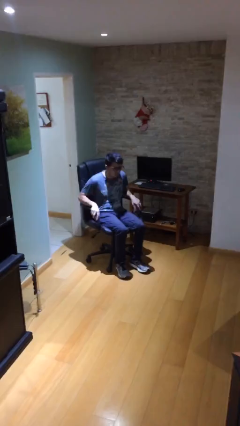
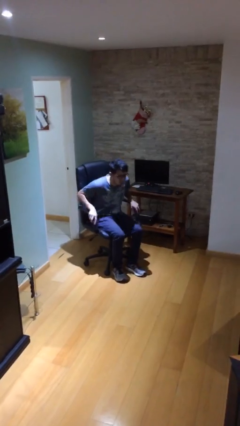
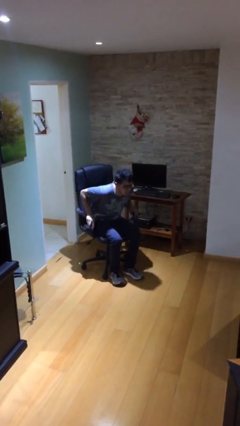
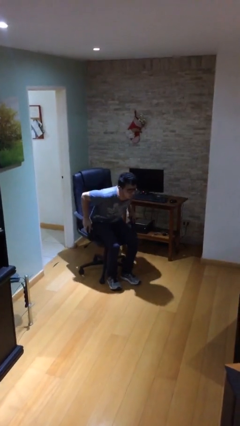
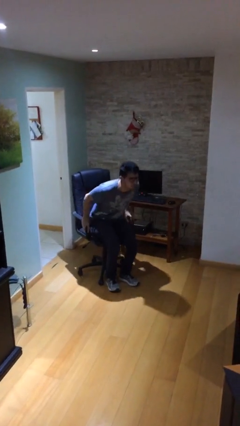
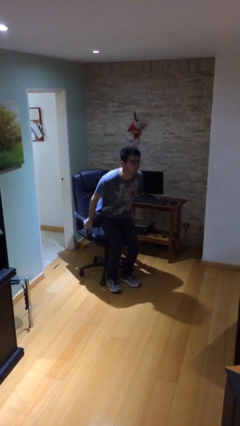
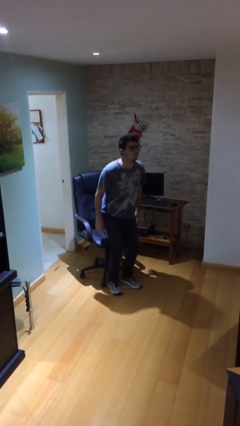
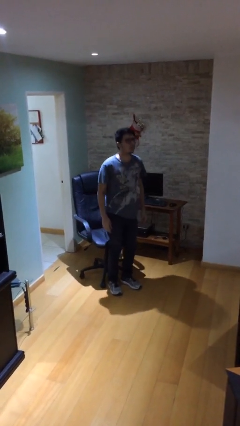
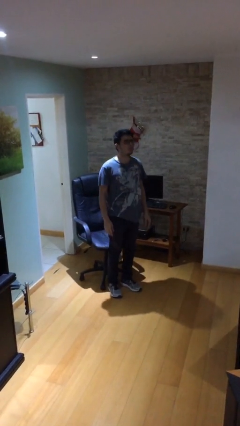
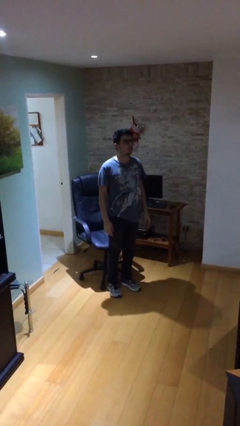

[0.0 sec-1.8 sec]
person stands up

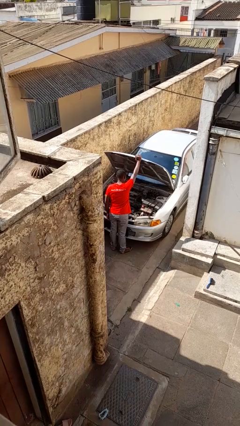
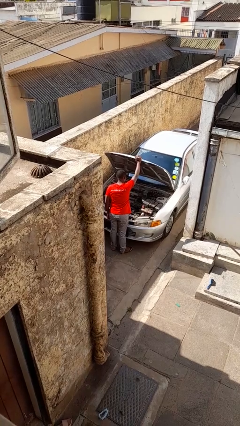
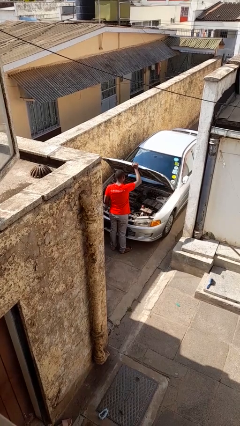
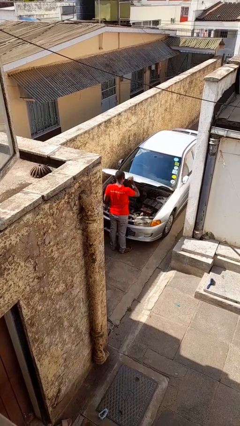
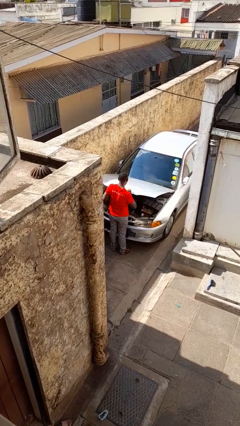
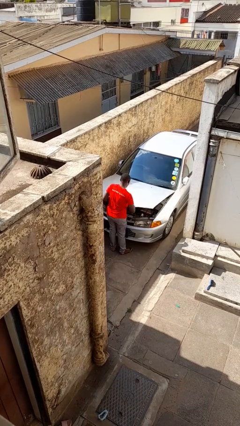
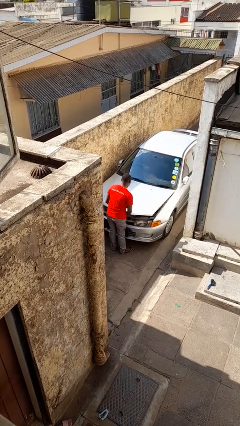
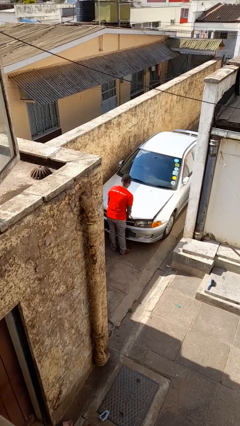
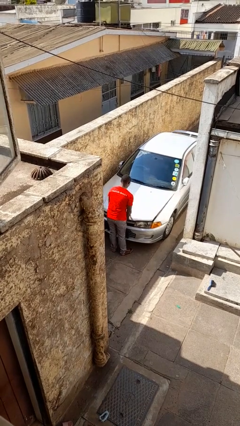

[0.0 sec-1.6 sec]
person closes car hood

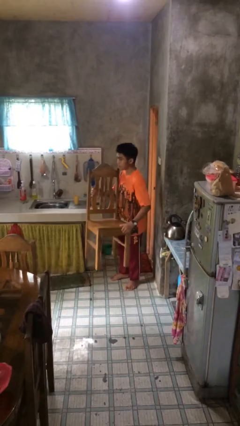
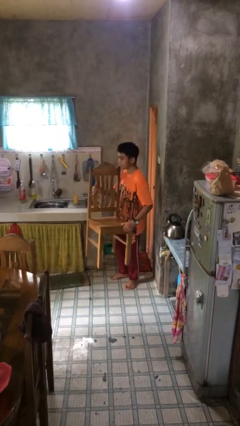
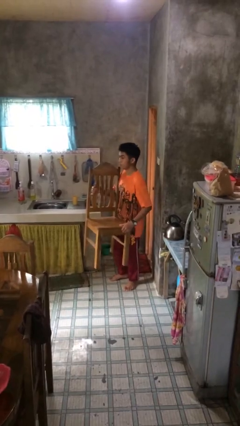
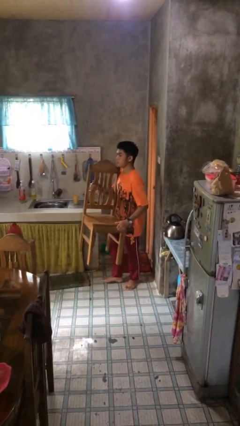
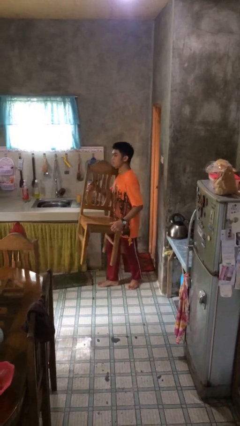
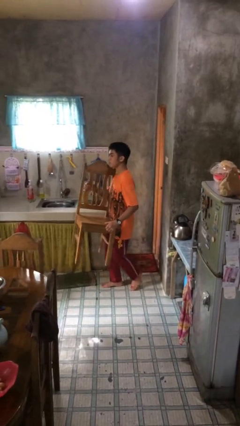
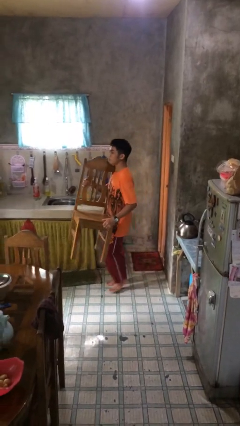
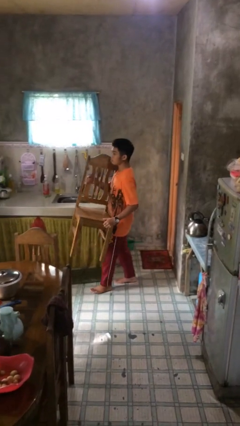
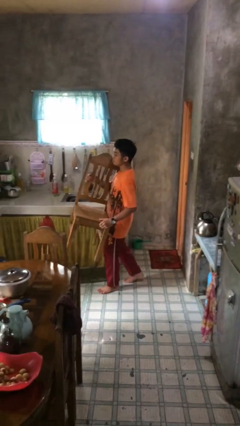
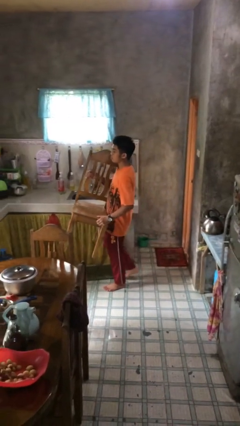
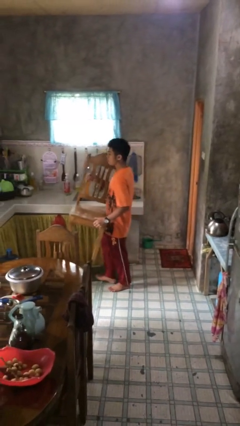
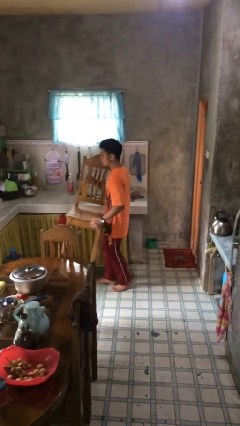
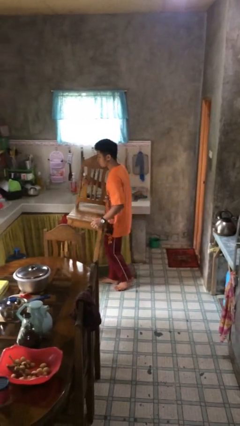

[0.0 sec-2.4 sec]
person carries heavy object

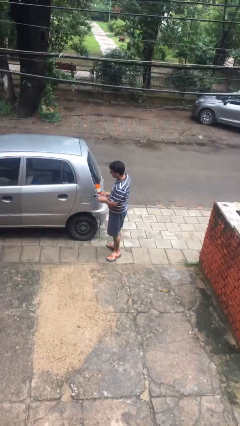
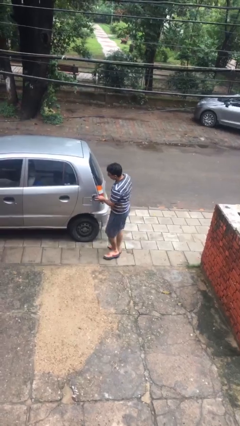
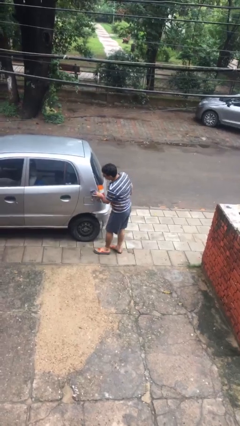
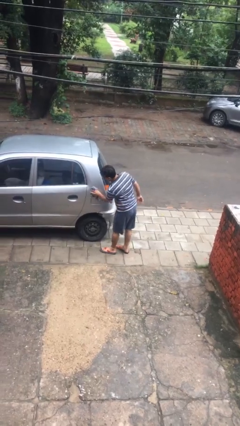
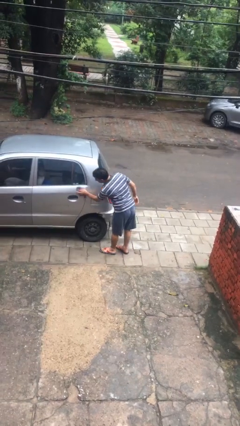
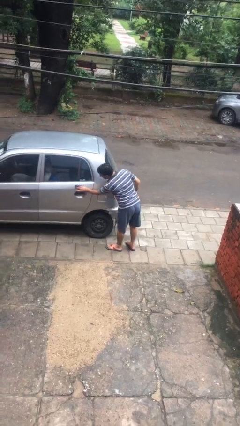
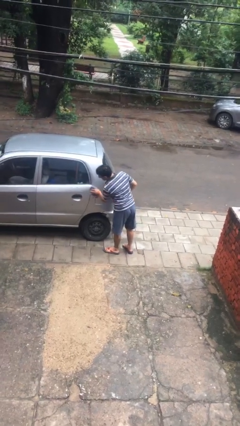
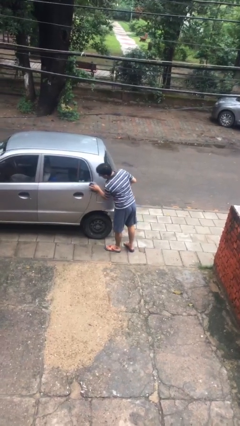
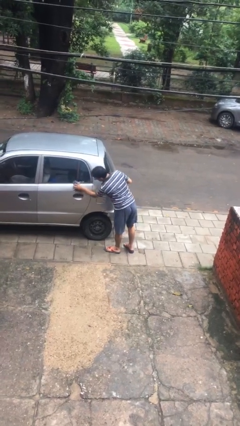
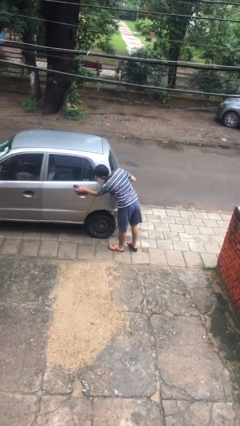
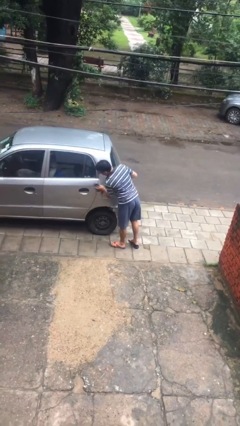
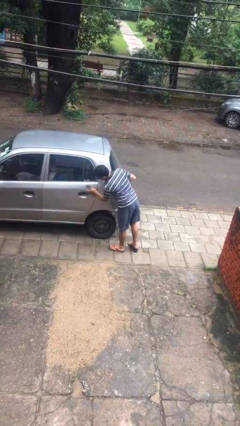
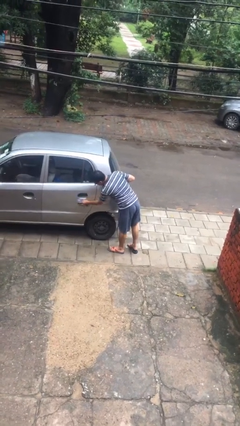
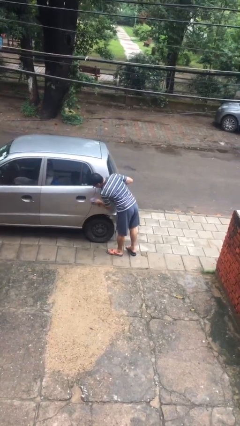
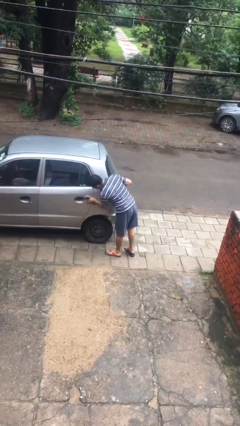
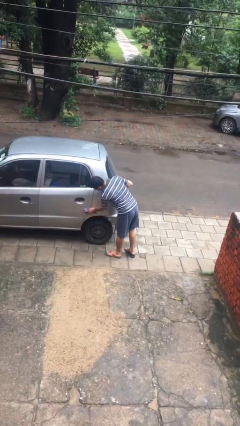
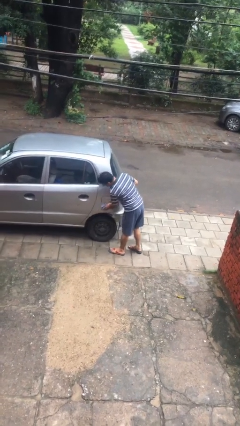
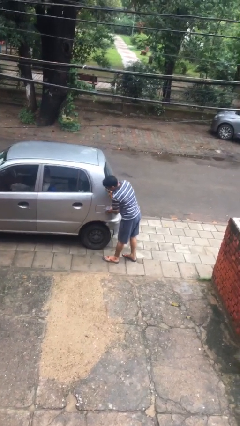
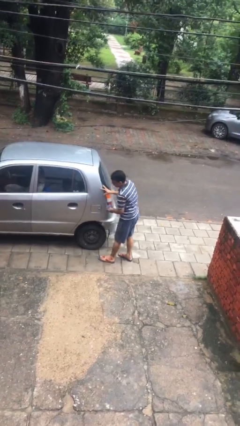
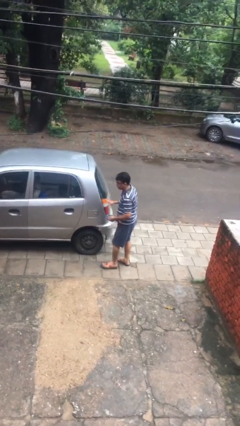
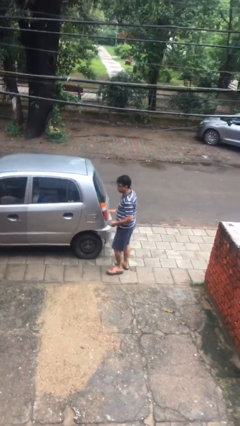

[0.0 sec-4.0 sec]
person polishes car with rag

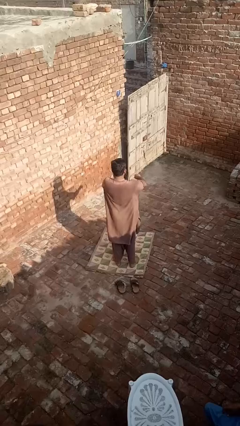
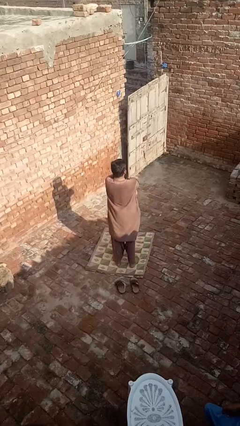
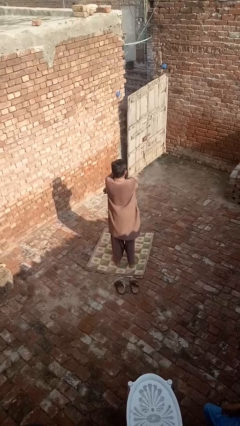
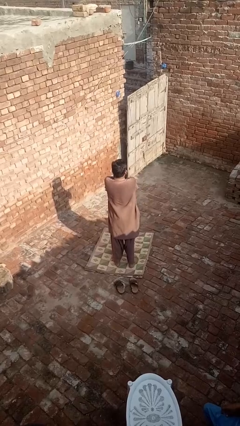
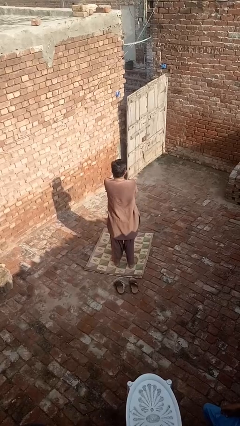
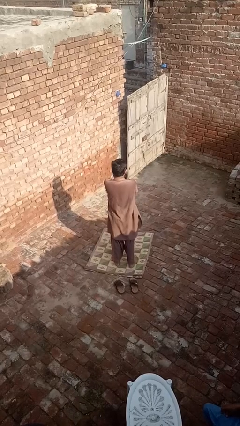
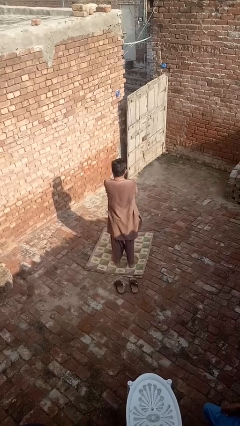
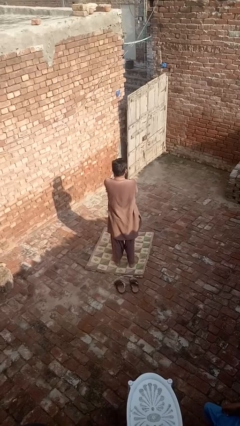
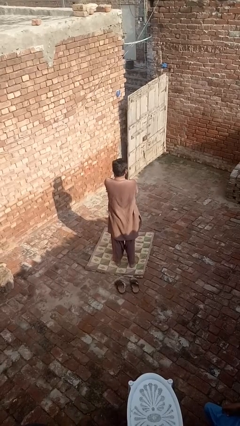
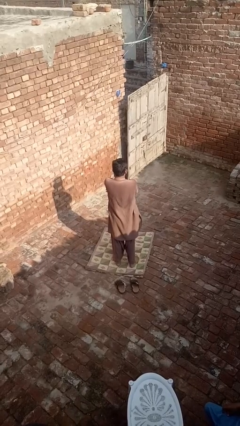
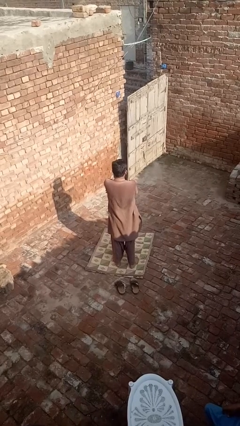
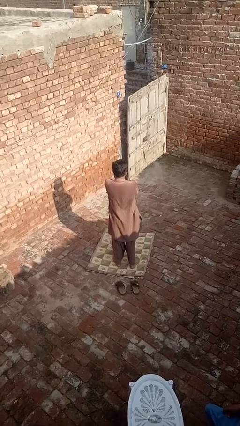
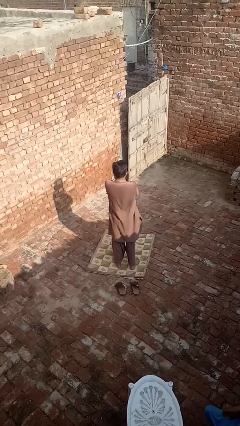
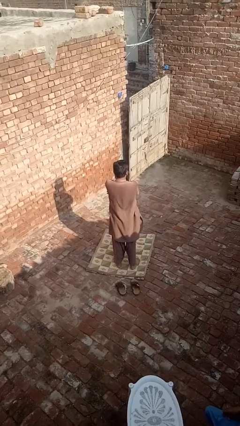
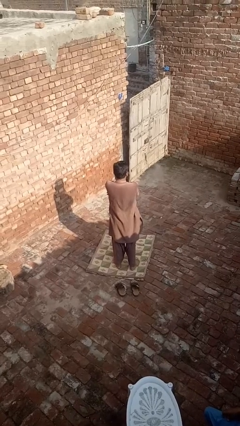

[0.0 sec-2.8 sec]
person crosses arms

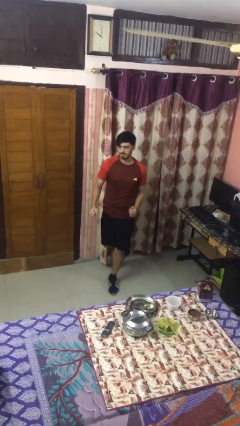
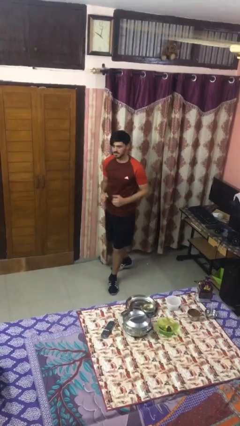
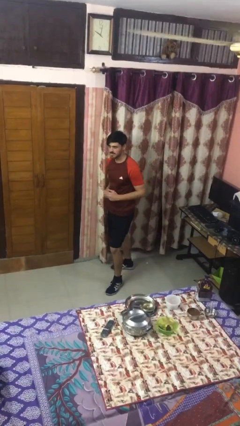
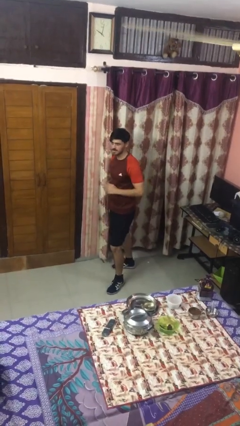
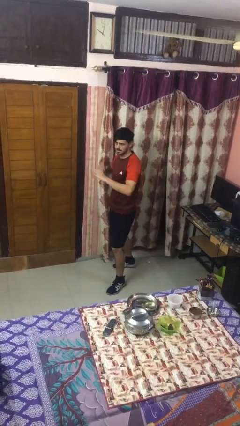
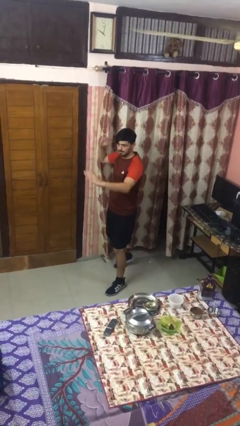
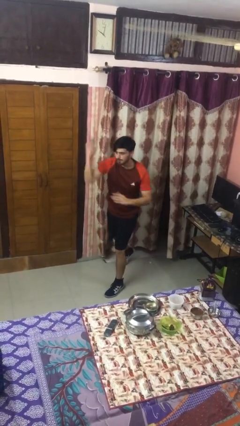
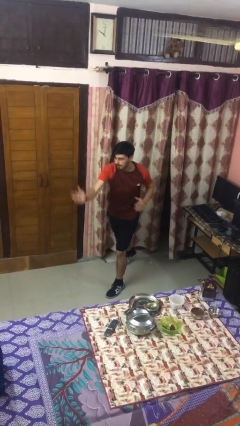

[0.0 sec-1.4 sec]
person karate chop

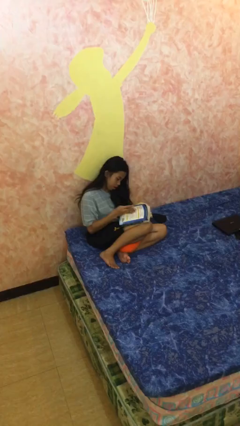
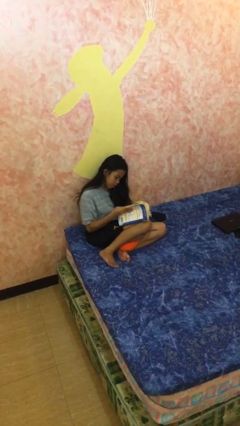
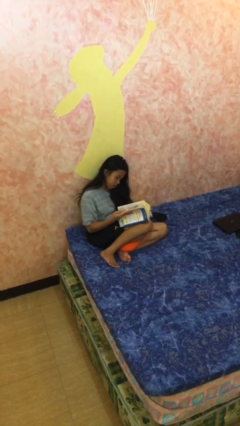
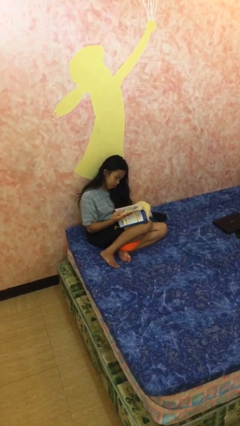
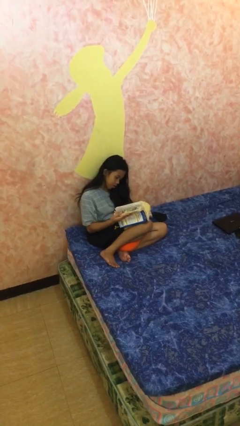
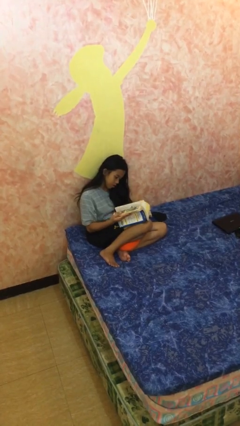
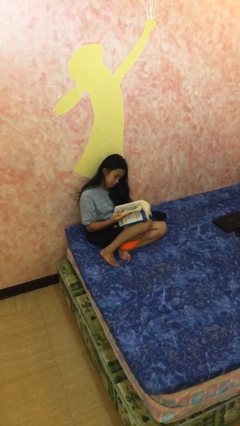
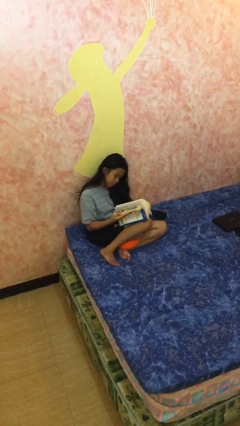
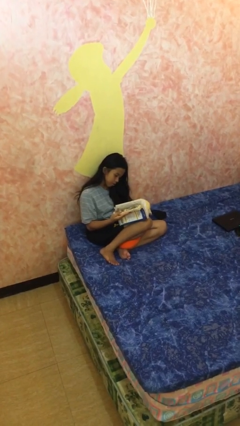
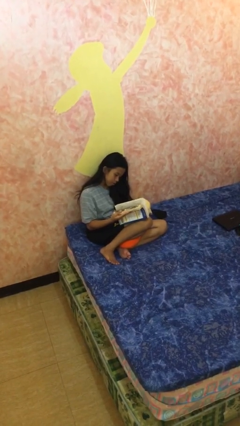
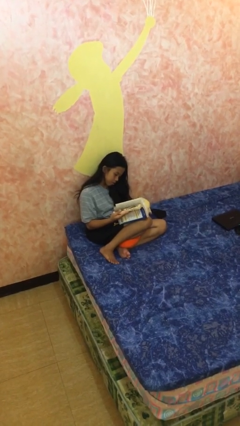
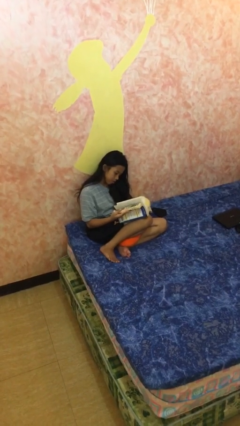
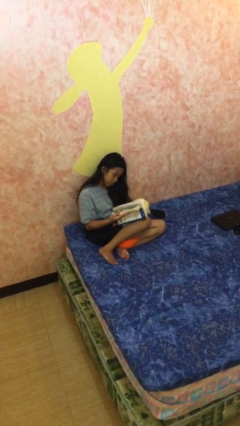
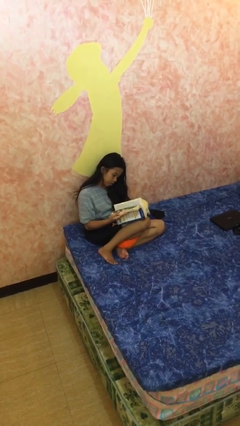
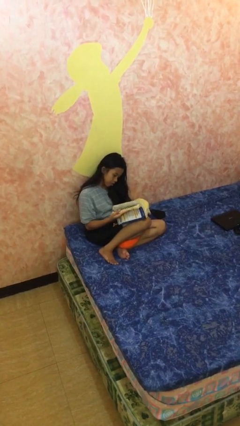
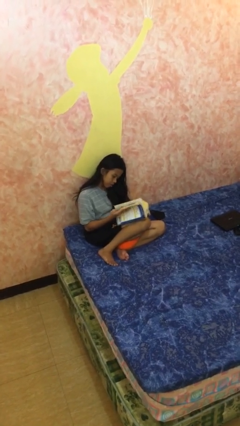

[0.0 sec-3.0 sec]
person reads document

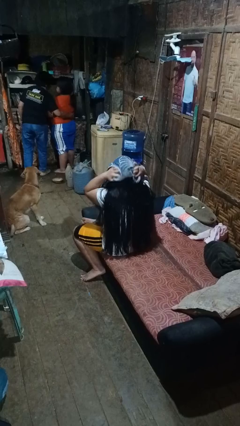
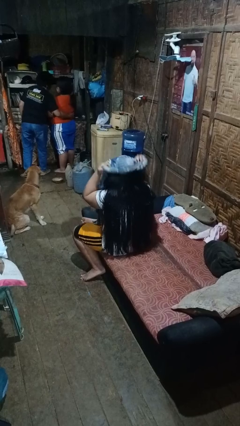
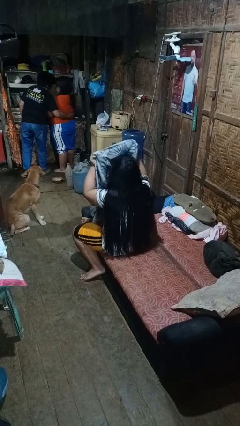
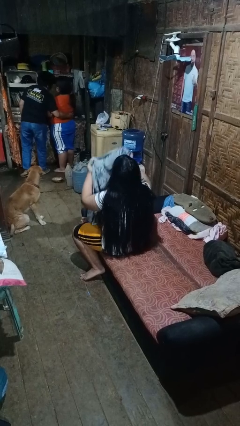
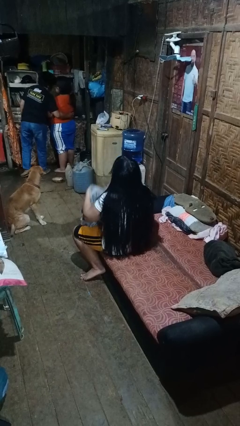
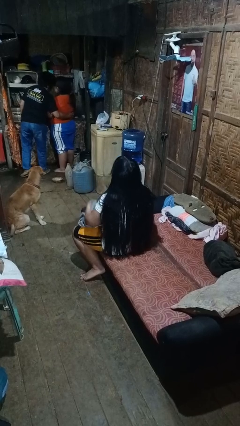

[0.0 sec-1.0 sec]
person dries hair with towel
